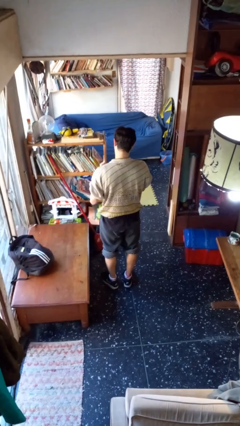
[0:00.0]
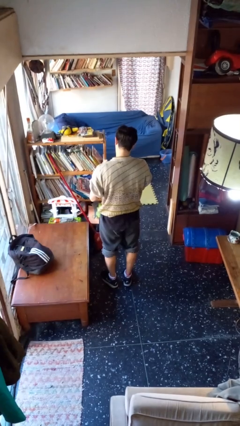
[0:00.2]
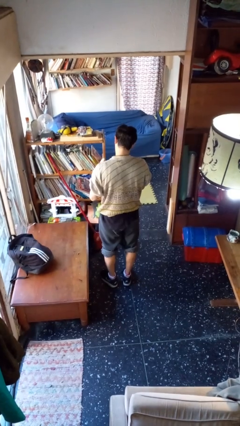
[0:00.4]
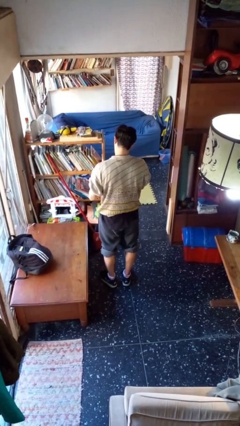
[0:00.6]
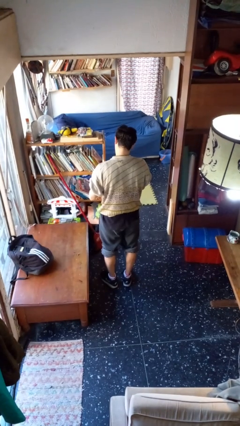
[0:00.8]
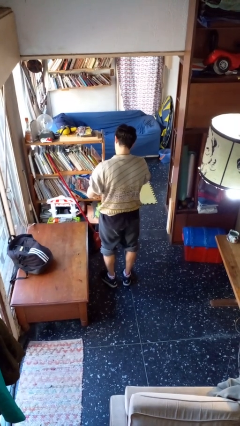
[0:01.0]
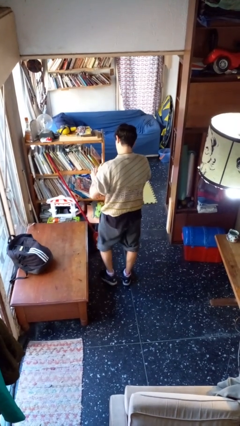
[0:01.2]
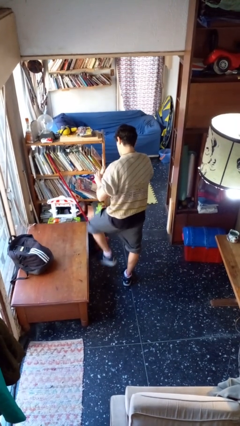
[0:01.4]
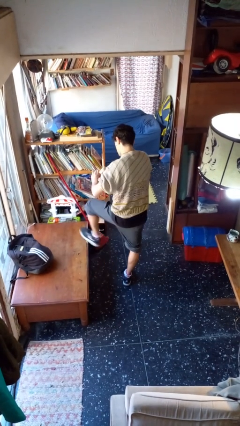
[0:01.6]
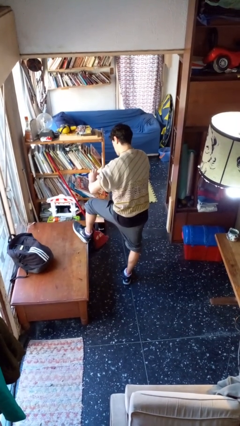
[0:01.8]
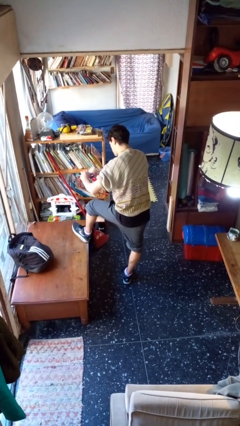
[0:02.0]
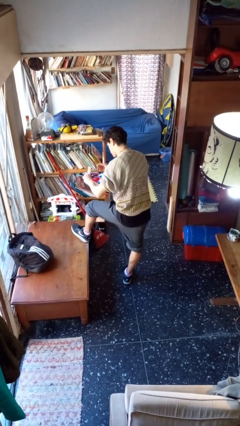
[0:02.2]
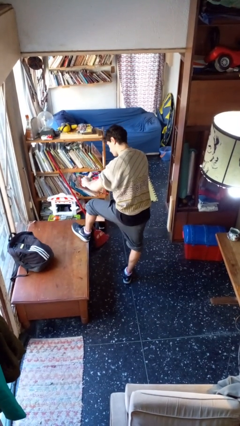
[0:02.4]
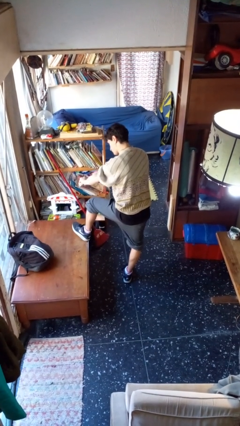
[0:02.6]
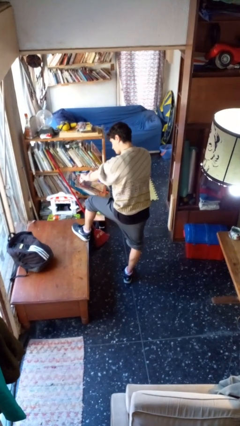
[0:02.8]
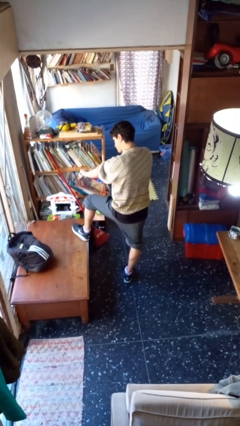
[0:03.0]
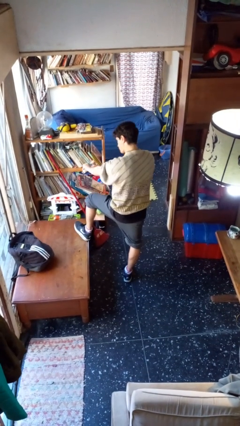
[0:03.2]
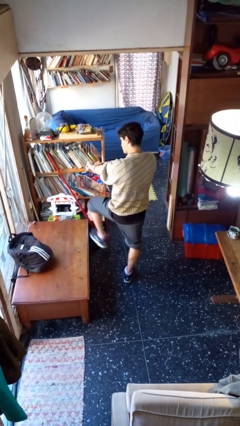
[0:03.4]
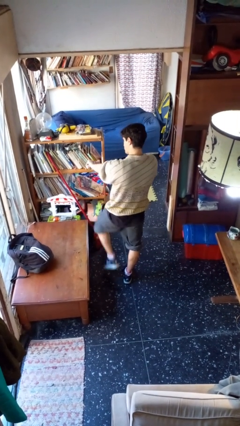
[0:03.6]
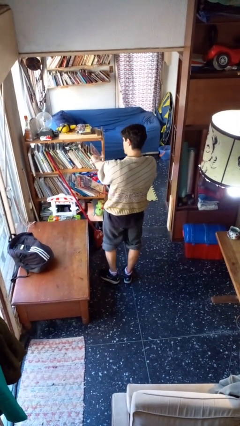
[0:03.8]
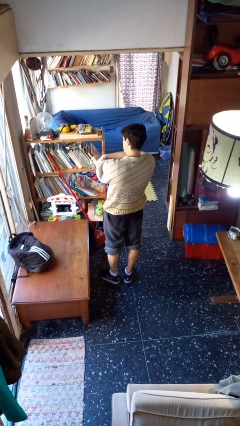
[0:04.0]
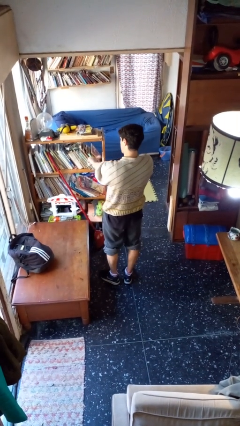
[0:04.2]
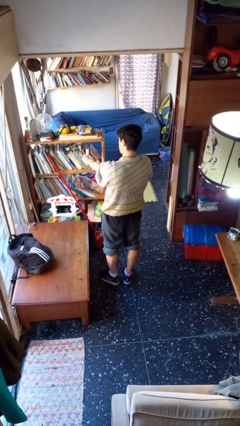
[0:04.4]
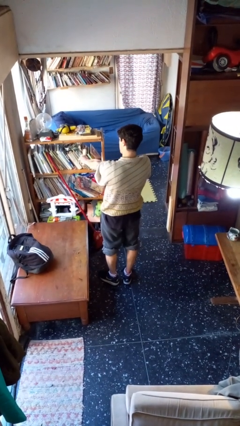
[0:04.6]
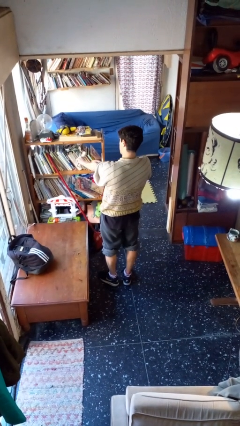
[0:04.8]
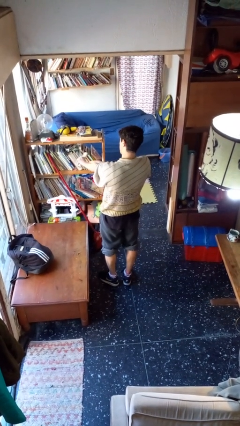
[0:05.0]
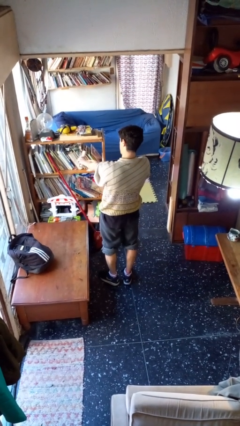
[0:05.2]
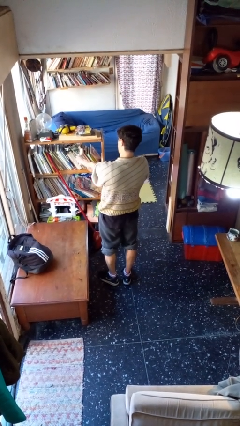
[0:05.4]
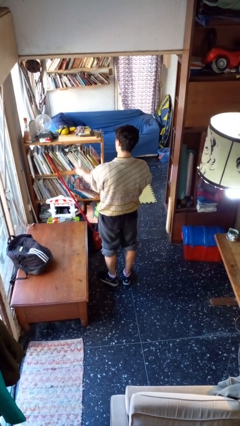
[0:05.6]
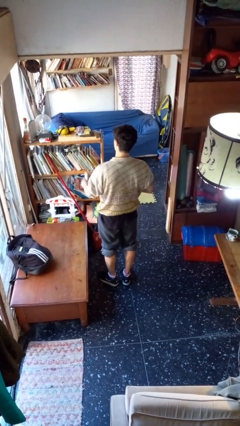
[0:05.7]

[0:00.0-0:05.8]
person applies sunscreen

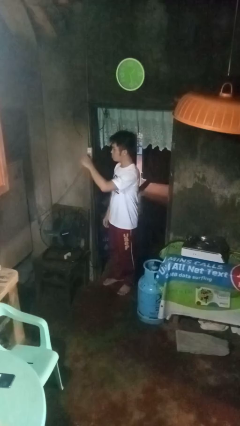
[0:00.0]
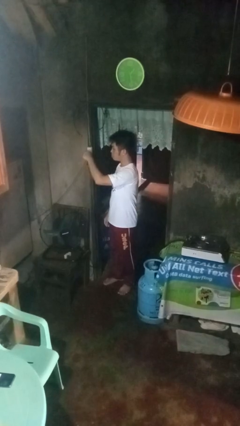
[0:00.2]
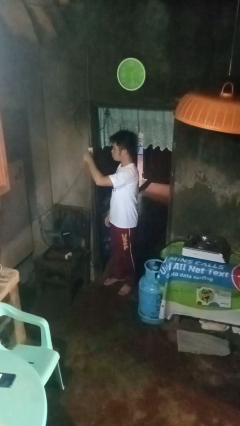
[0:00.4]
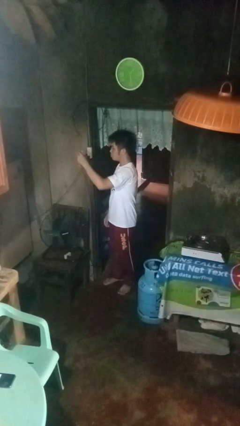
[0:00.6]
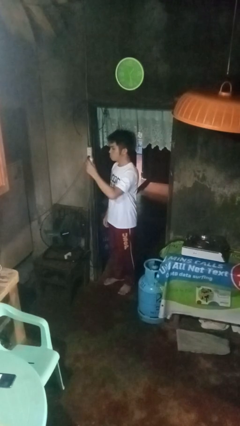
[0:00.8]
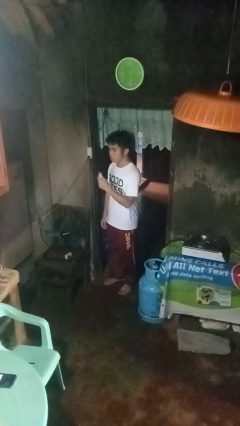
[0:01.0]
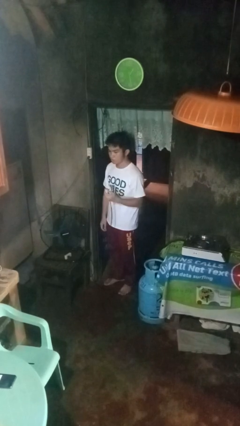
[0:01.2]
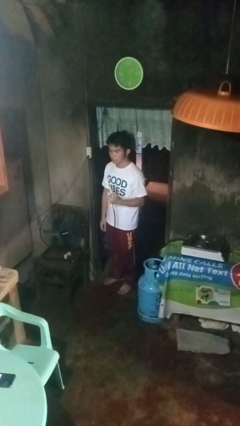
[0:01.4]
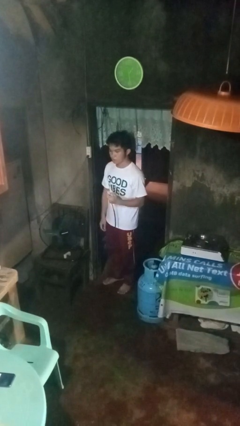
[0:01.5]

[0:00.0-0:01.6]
person unplugs from electrical socket

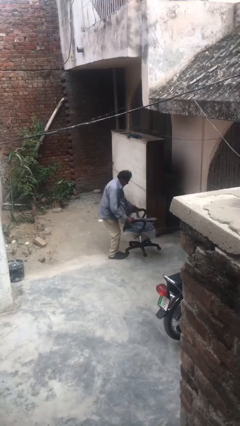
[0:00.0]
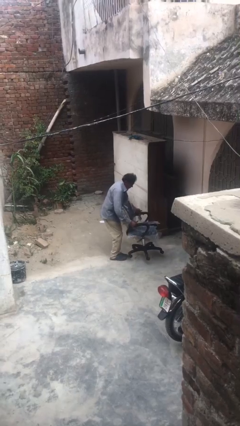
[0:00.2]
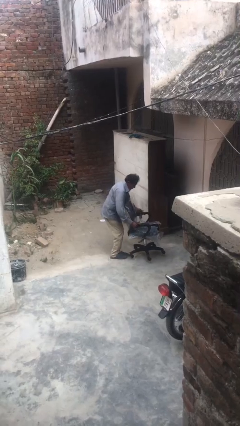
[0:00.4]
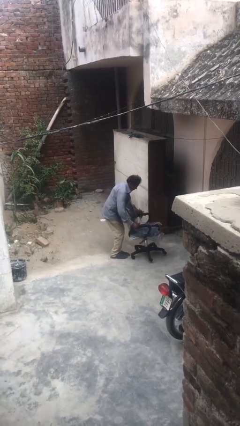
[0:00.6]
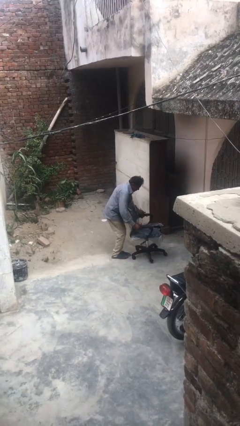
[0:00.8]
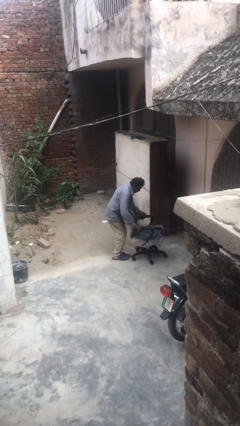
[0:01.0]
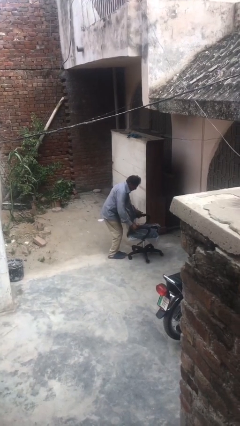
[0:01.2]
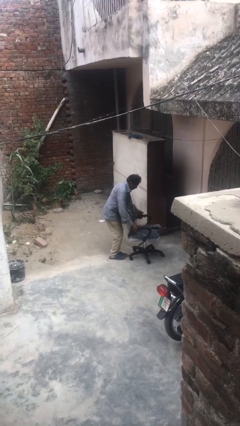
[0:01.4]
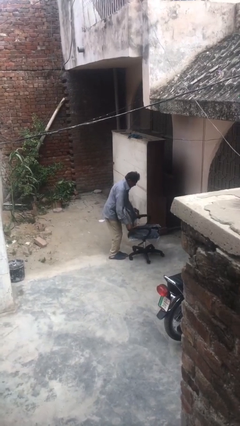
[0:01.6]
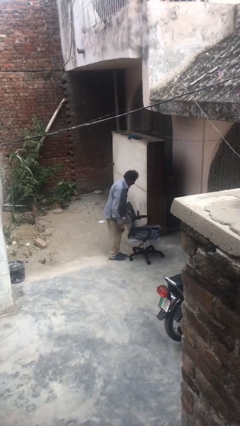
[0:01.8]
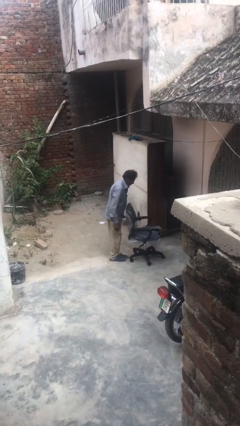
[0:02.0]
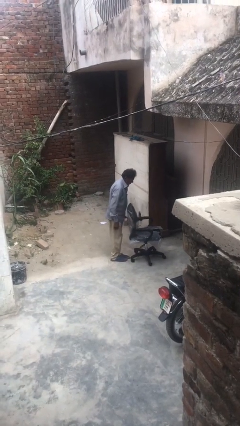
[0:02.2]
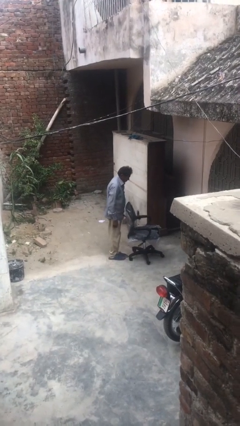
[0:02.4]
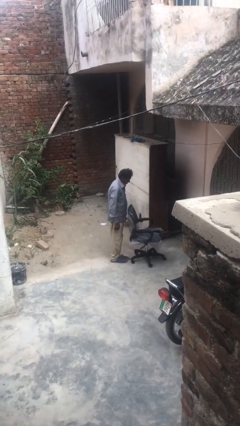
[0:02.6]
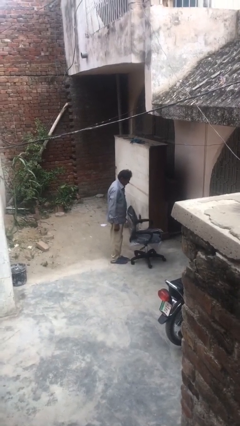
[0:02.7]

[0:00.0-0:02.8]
person puts down object on floor

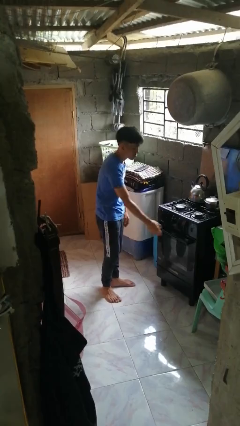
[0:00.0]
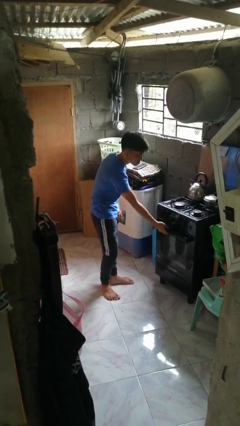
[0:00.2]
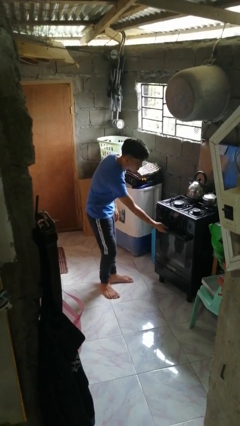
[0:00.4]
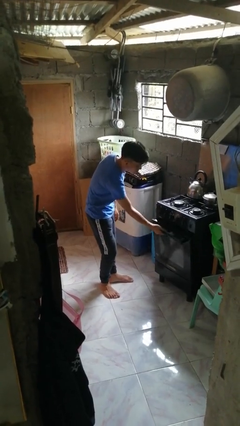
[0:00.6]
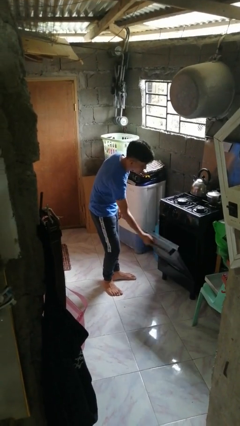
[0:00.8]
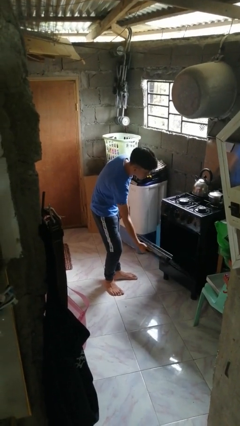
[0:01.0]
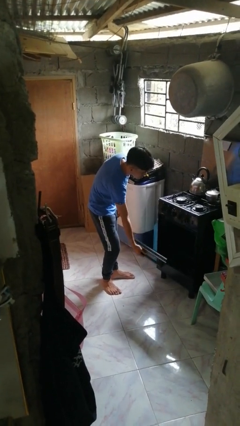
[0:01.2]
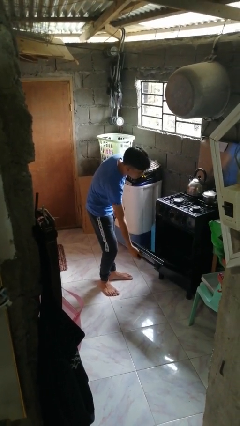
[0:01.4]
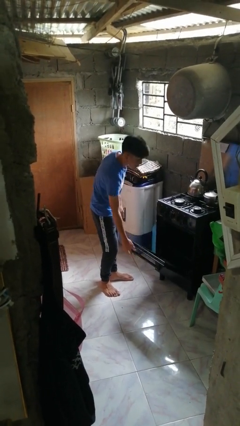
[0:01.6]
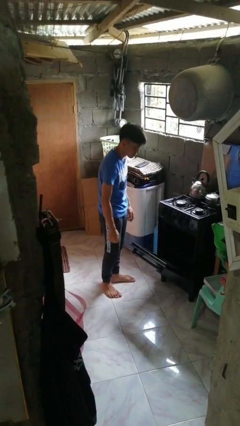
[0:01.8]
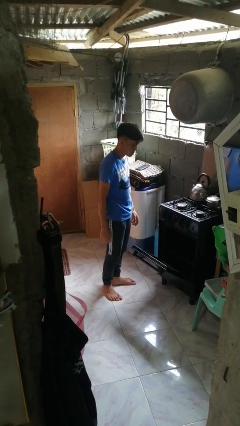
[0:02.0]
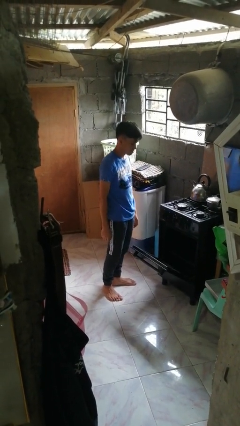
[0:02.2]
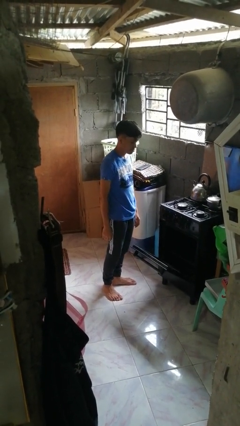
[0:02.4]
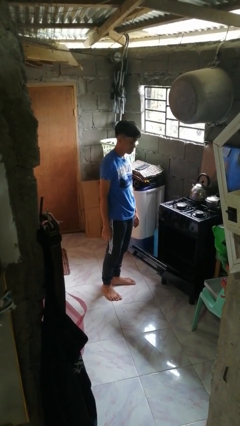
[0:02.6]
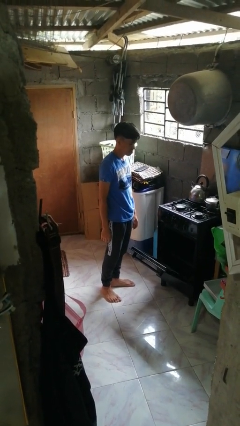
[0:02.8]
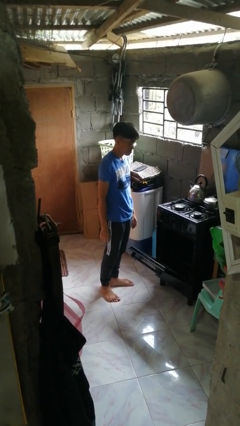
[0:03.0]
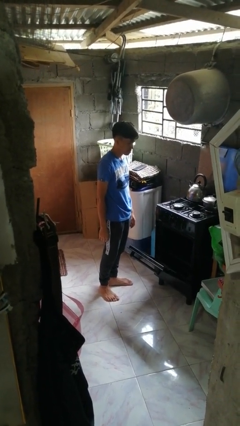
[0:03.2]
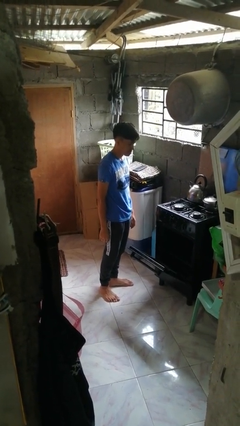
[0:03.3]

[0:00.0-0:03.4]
person opens oven door

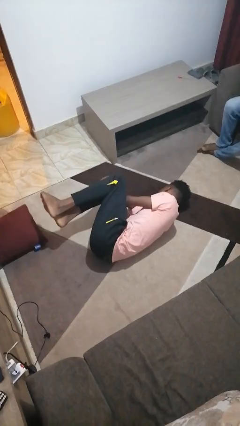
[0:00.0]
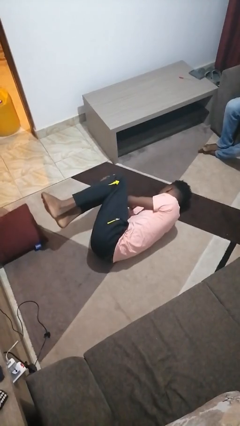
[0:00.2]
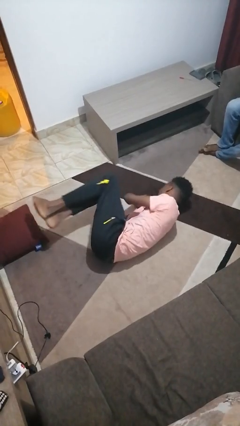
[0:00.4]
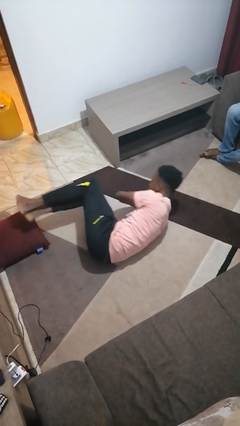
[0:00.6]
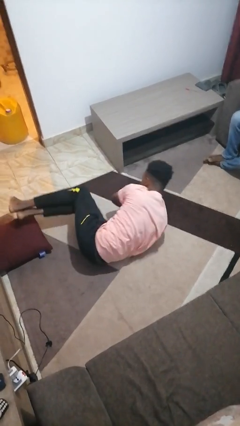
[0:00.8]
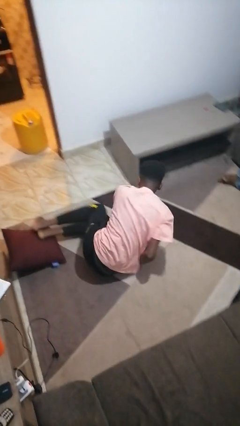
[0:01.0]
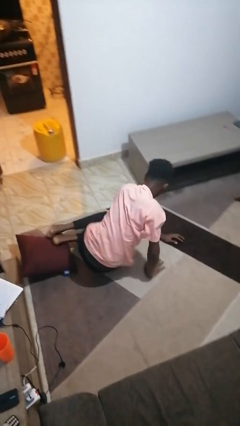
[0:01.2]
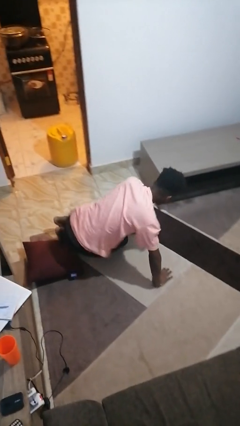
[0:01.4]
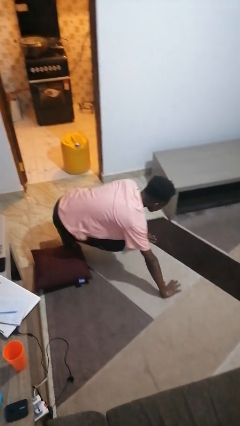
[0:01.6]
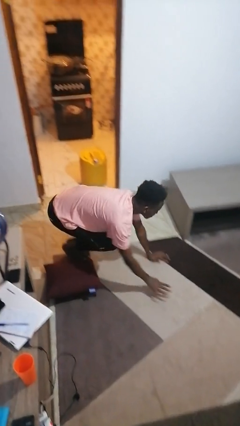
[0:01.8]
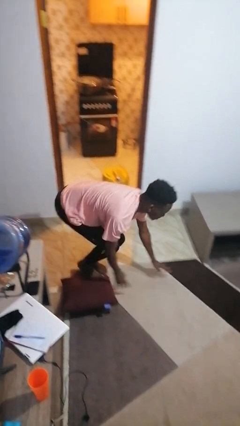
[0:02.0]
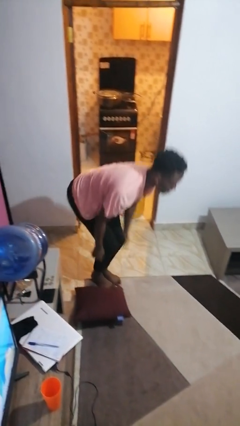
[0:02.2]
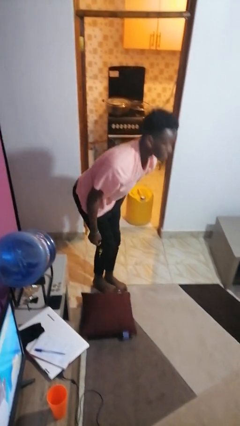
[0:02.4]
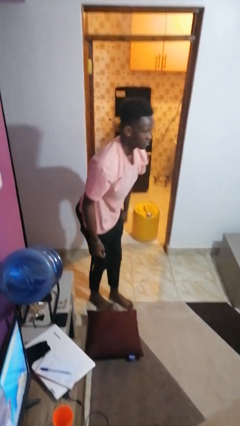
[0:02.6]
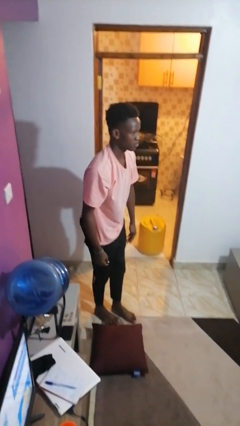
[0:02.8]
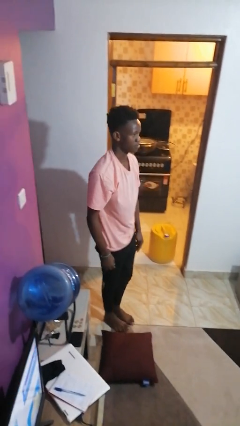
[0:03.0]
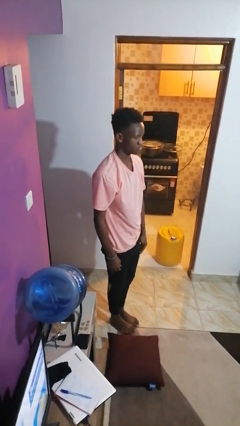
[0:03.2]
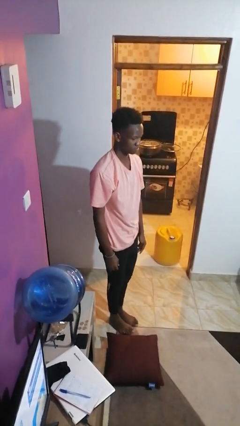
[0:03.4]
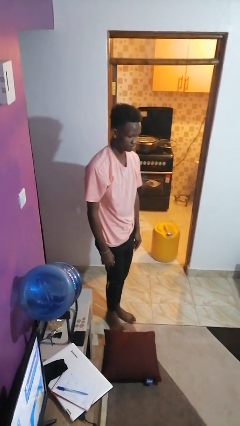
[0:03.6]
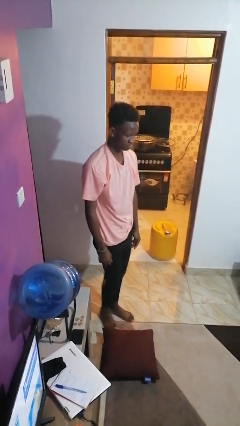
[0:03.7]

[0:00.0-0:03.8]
person stands up from floor

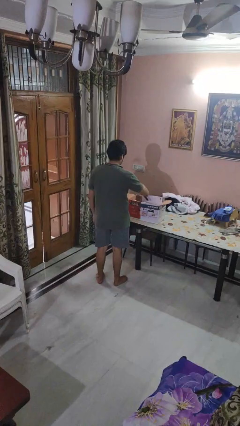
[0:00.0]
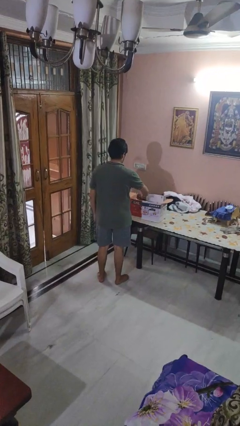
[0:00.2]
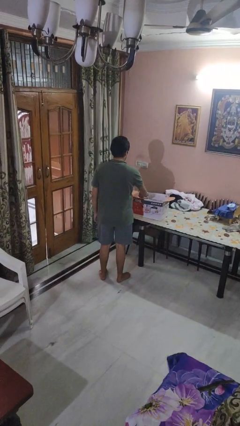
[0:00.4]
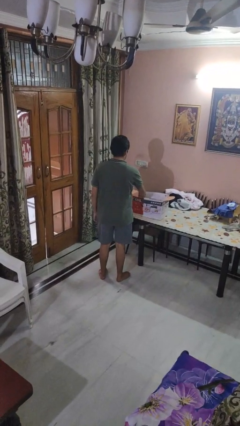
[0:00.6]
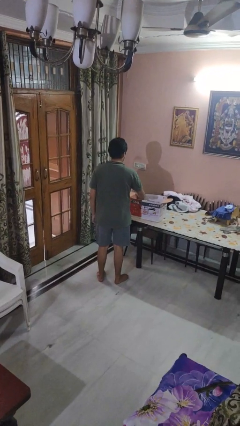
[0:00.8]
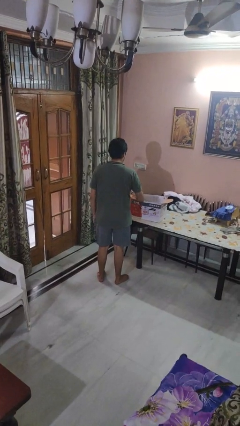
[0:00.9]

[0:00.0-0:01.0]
person puts object into box
